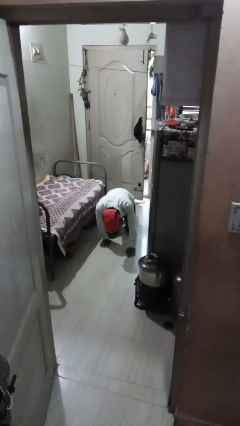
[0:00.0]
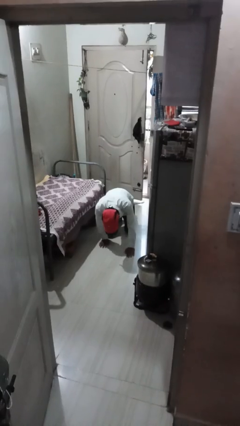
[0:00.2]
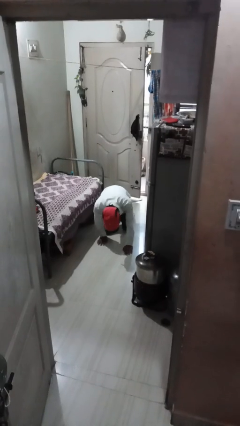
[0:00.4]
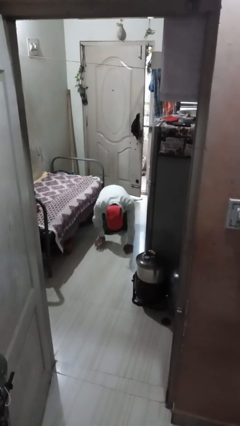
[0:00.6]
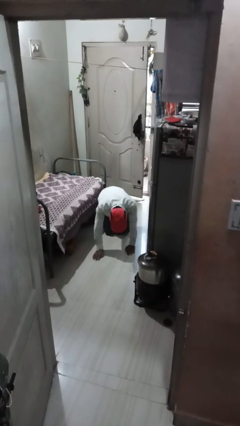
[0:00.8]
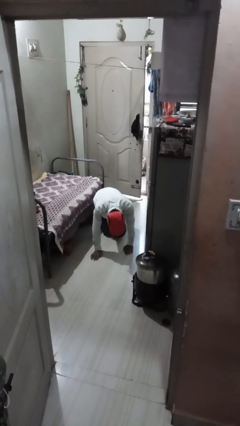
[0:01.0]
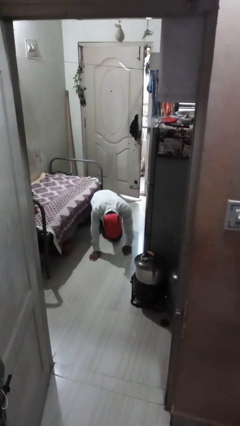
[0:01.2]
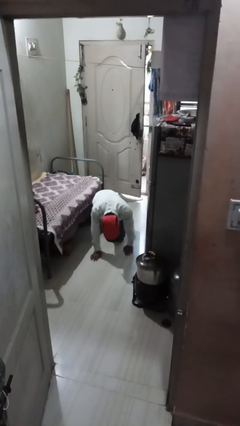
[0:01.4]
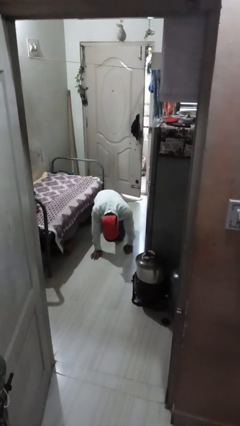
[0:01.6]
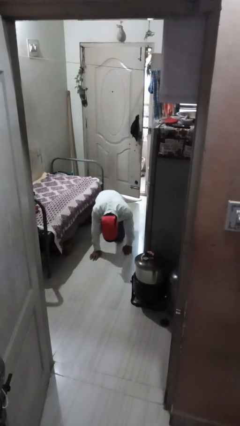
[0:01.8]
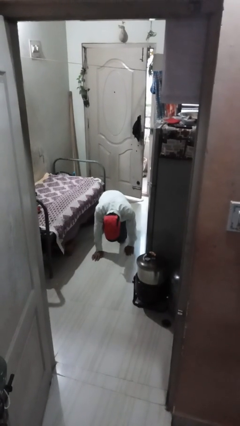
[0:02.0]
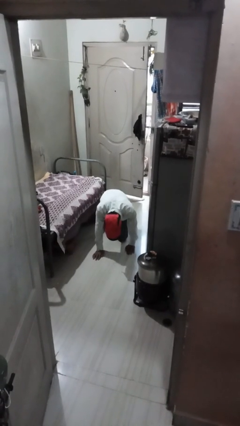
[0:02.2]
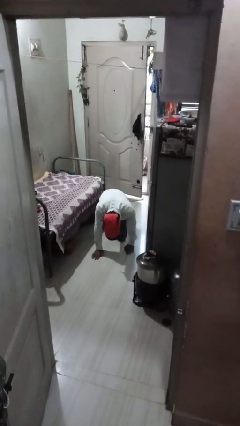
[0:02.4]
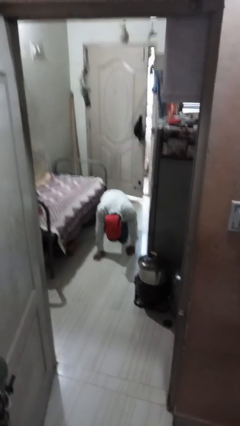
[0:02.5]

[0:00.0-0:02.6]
person crawls

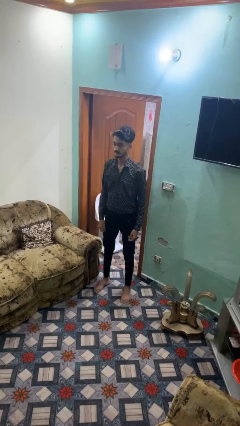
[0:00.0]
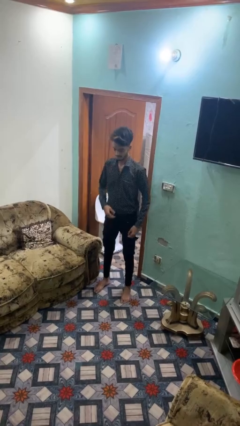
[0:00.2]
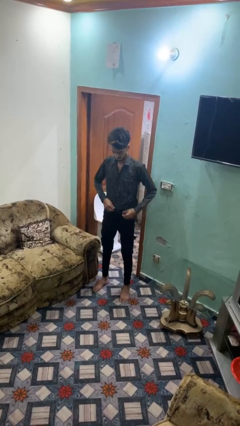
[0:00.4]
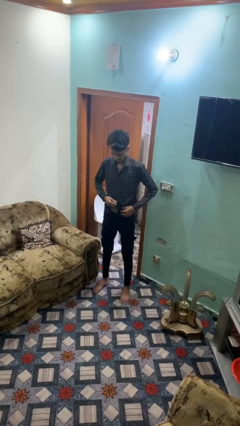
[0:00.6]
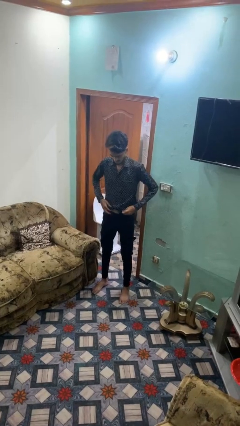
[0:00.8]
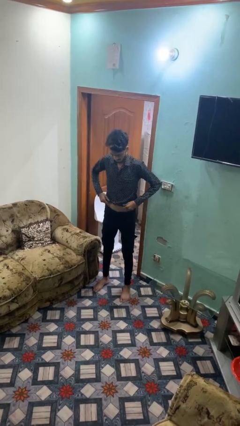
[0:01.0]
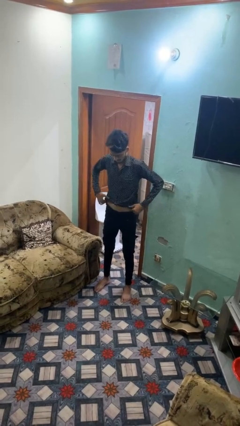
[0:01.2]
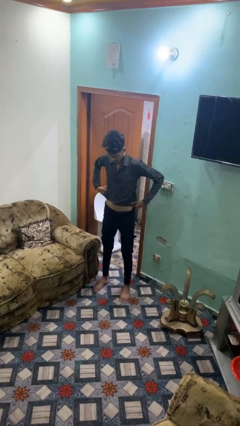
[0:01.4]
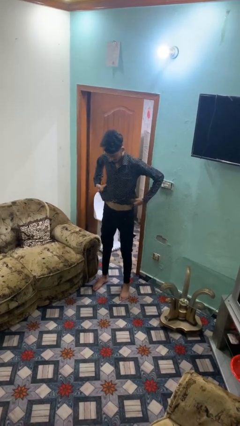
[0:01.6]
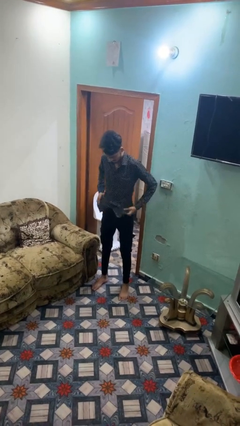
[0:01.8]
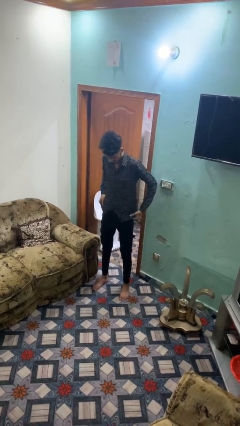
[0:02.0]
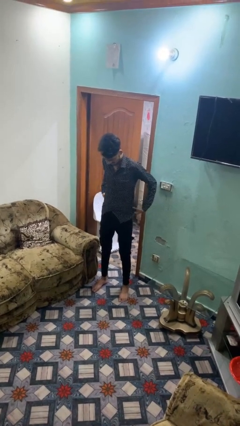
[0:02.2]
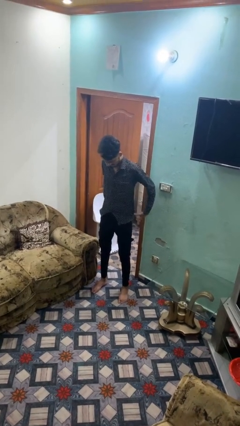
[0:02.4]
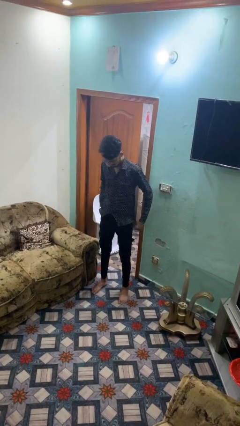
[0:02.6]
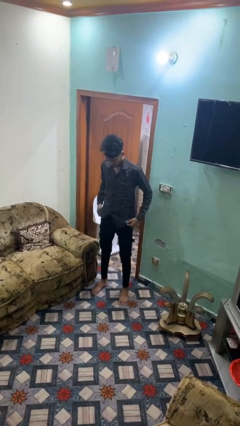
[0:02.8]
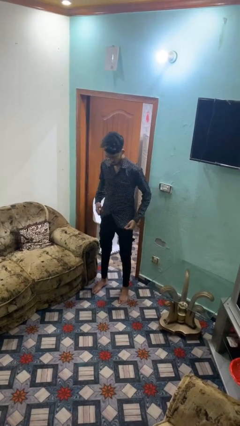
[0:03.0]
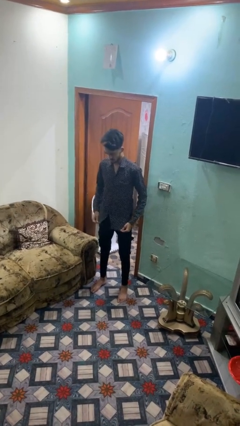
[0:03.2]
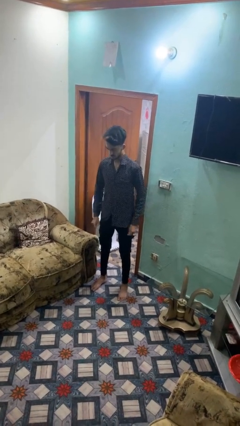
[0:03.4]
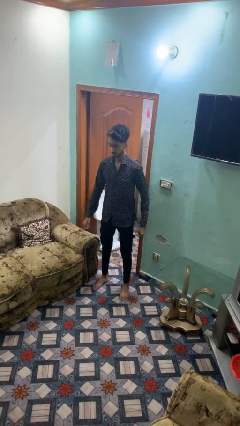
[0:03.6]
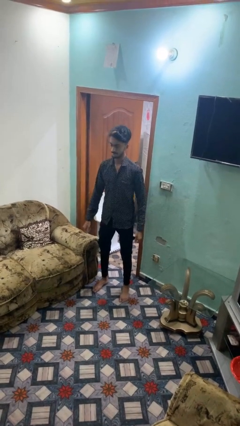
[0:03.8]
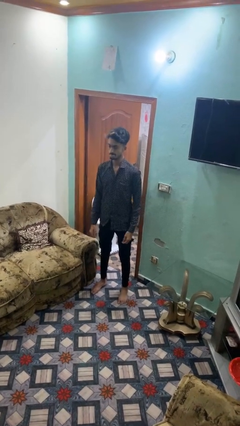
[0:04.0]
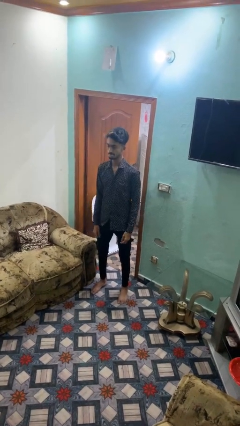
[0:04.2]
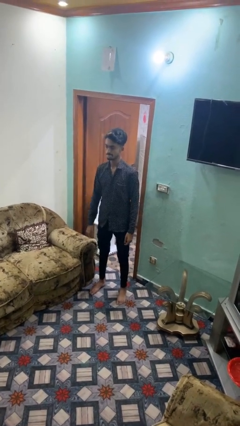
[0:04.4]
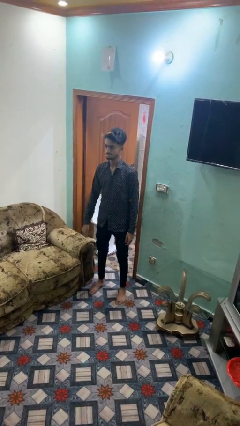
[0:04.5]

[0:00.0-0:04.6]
person untucks shirt

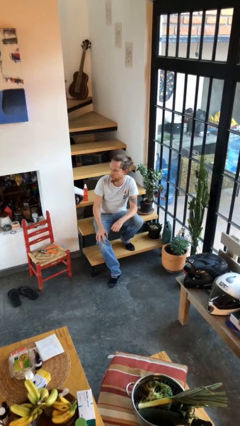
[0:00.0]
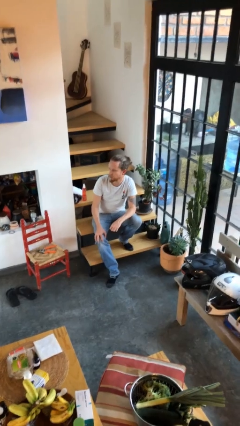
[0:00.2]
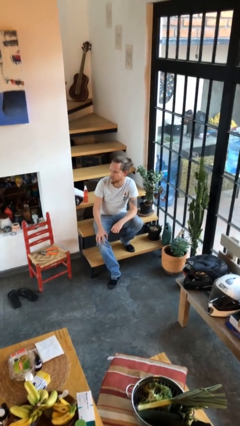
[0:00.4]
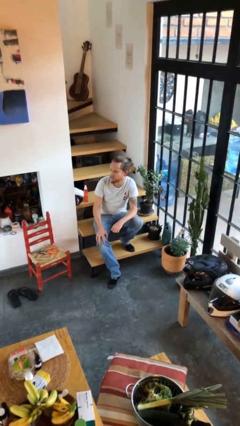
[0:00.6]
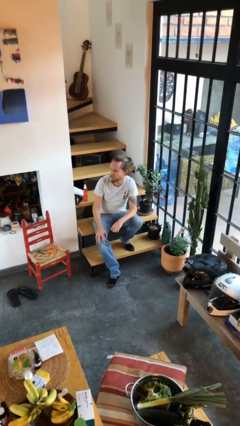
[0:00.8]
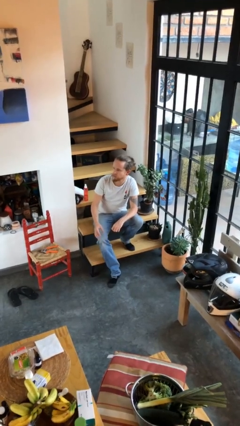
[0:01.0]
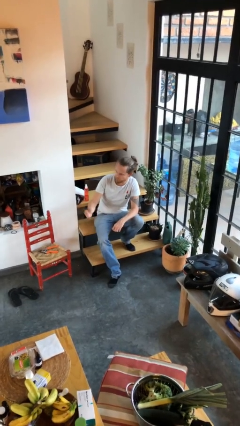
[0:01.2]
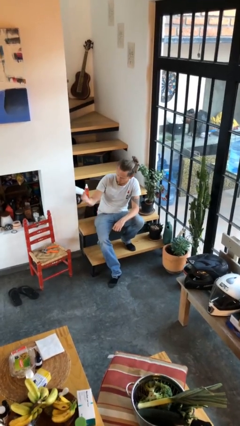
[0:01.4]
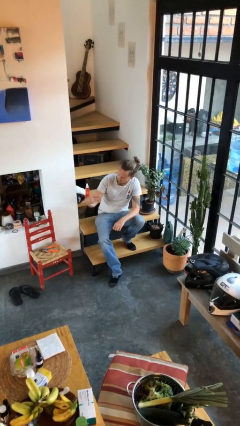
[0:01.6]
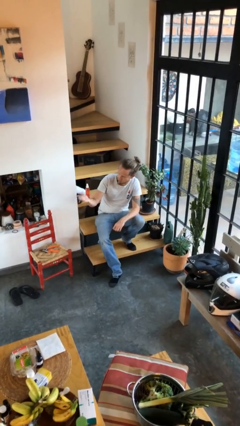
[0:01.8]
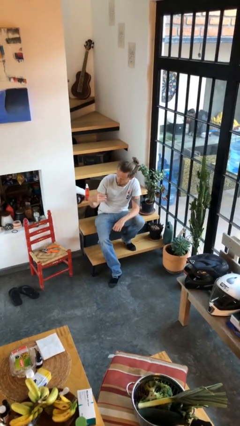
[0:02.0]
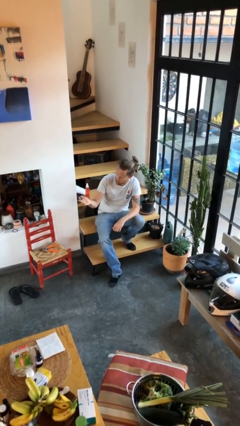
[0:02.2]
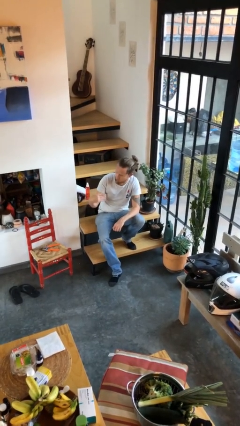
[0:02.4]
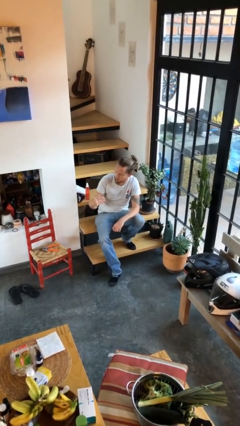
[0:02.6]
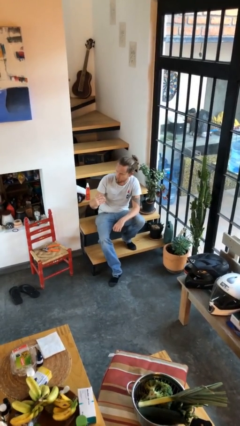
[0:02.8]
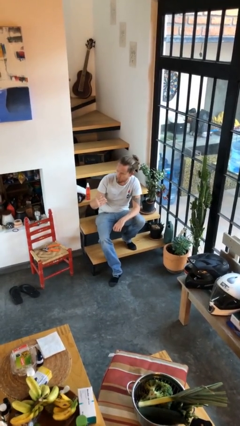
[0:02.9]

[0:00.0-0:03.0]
person gestures come here

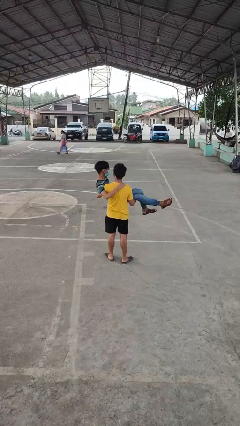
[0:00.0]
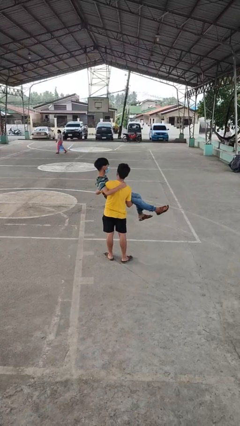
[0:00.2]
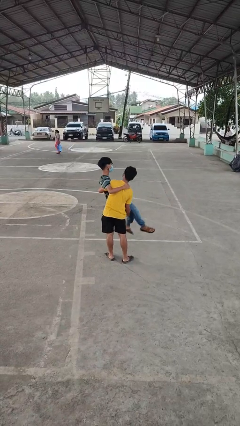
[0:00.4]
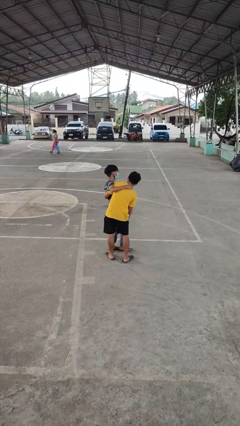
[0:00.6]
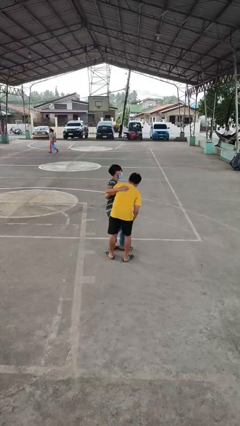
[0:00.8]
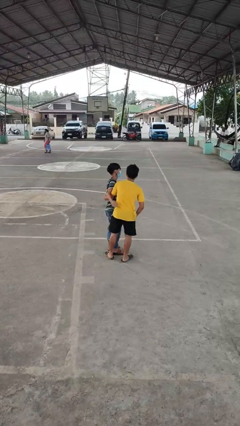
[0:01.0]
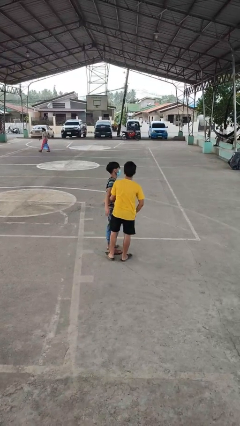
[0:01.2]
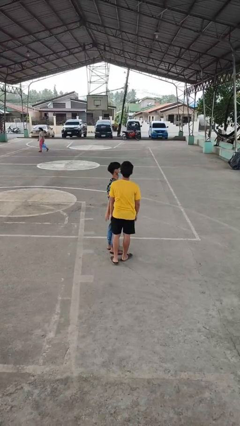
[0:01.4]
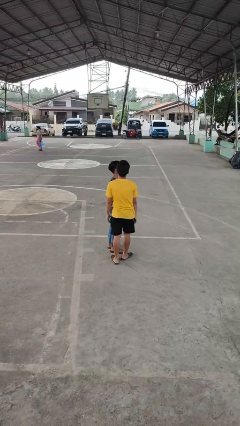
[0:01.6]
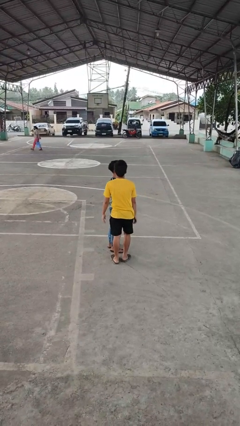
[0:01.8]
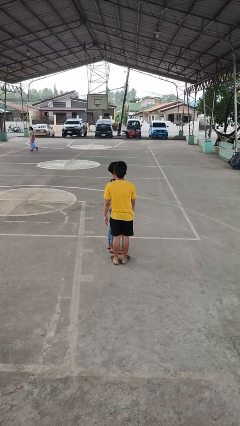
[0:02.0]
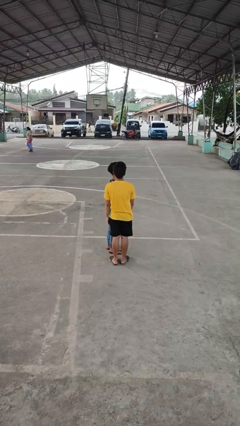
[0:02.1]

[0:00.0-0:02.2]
person puts down person

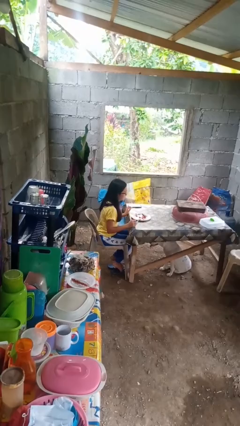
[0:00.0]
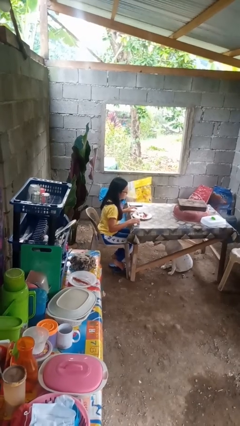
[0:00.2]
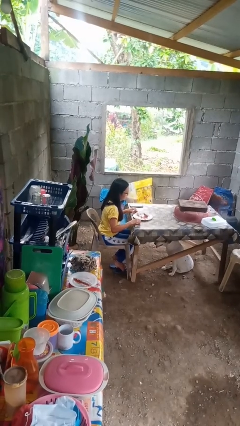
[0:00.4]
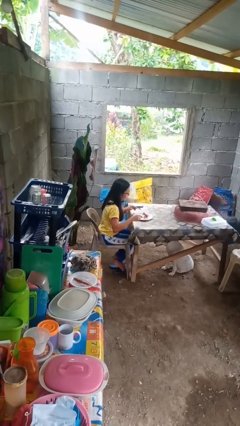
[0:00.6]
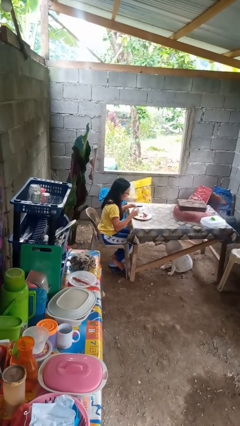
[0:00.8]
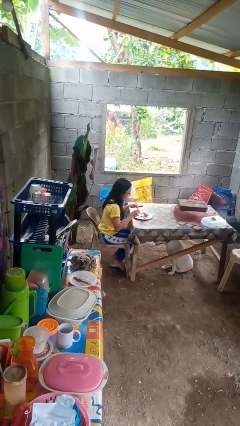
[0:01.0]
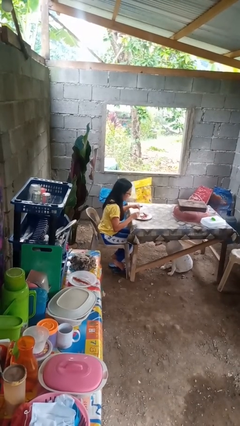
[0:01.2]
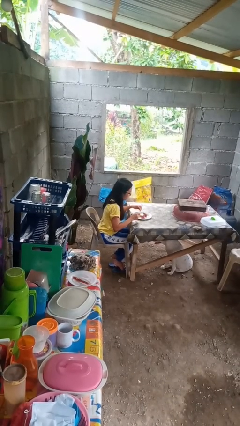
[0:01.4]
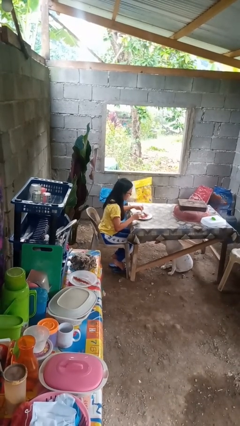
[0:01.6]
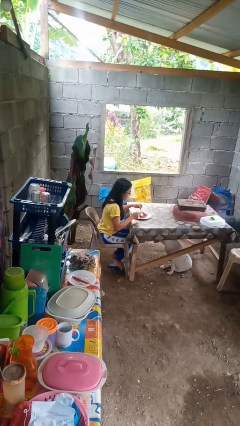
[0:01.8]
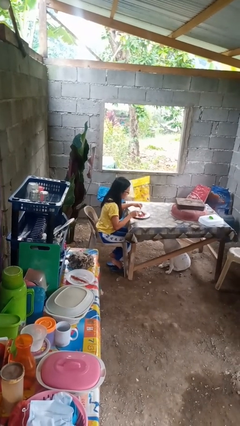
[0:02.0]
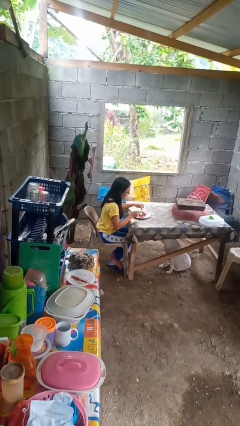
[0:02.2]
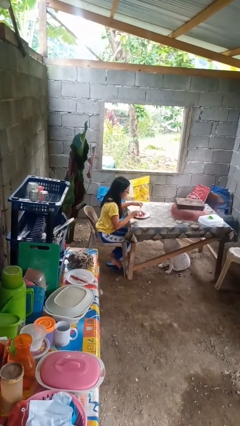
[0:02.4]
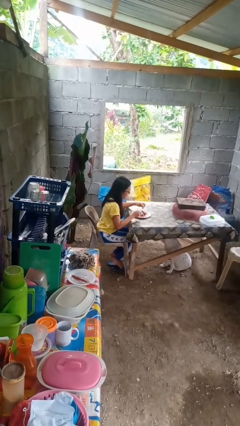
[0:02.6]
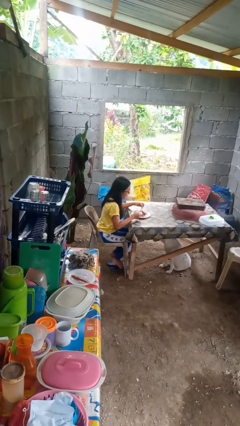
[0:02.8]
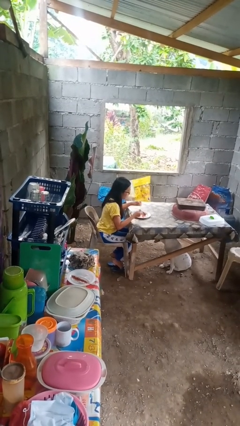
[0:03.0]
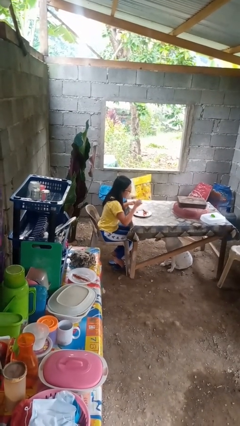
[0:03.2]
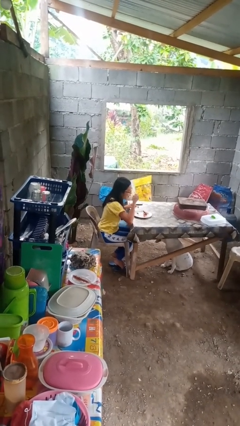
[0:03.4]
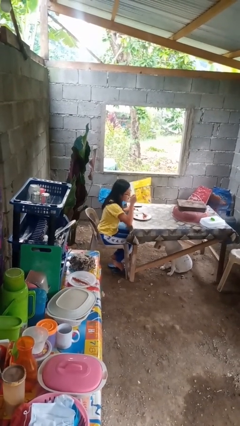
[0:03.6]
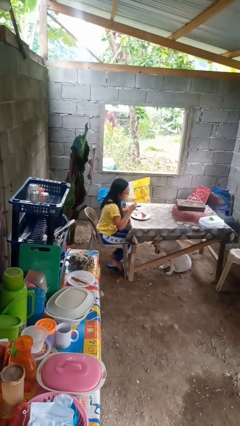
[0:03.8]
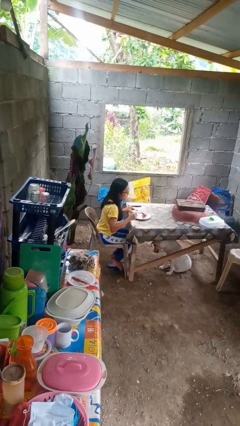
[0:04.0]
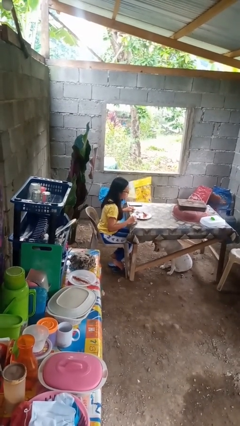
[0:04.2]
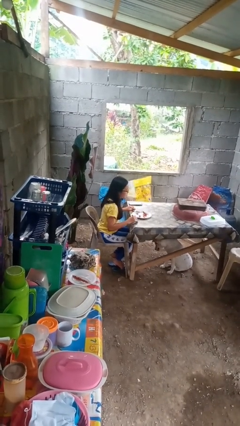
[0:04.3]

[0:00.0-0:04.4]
person eats with utensil

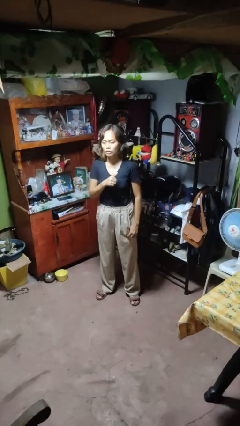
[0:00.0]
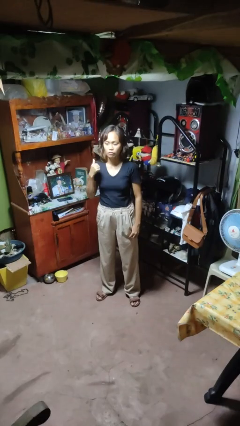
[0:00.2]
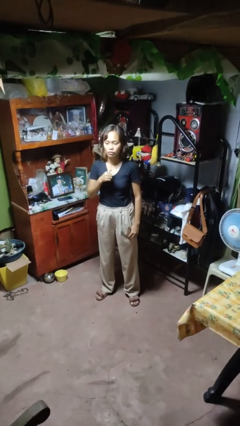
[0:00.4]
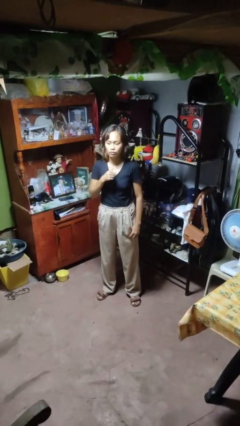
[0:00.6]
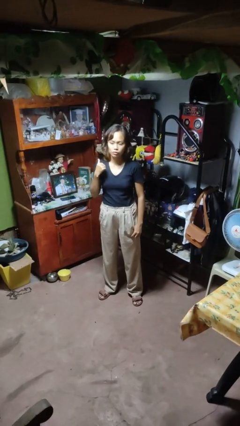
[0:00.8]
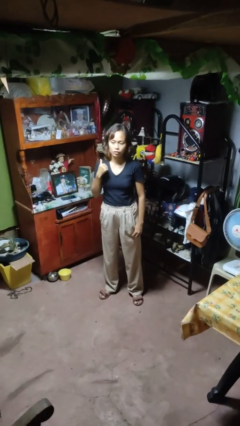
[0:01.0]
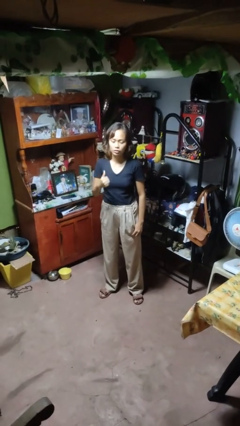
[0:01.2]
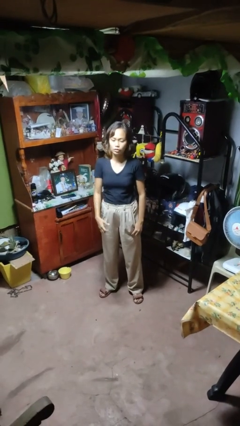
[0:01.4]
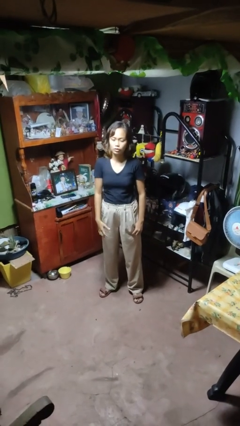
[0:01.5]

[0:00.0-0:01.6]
person gestures cut
